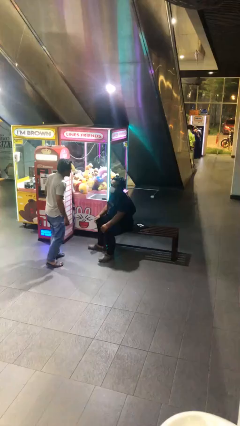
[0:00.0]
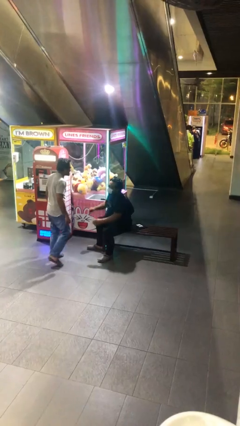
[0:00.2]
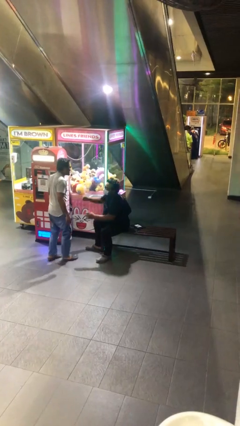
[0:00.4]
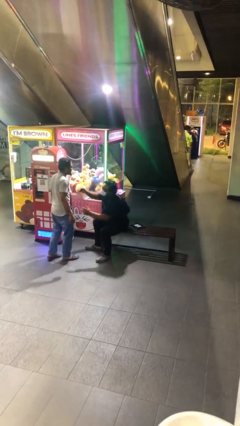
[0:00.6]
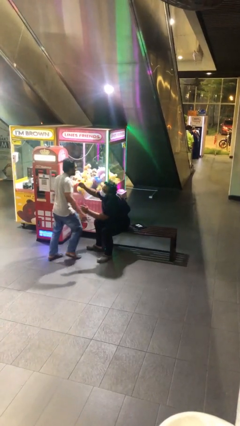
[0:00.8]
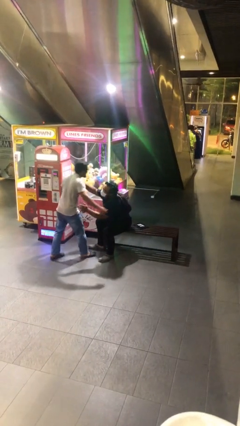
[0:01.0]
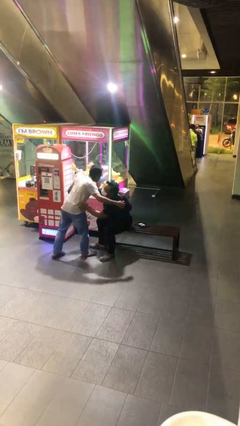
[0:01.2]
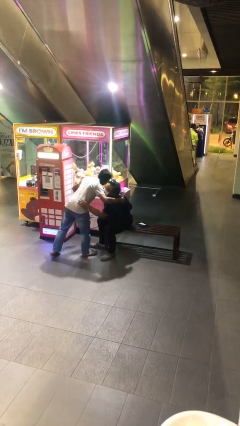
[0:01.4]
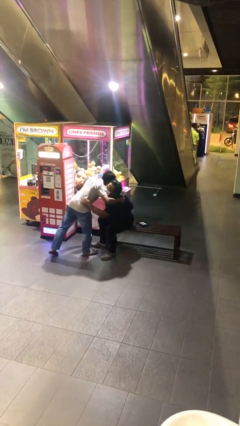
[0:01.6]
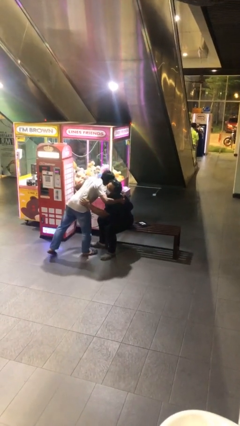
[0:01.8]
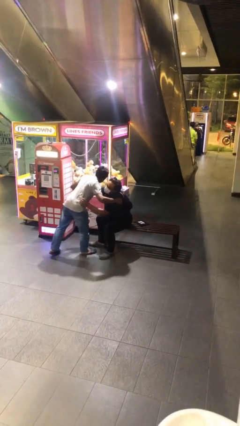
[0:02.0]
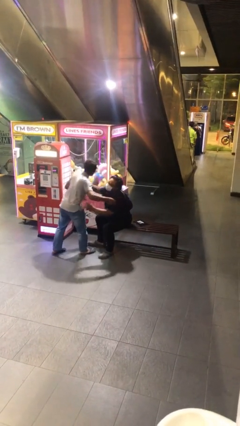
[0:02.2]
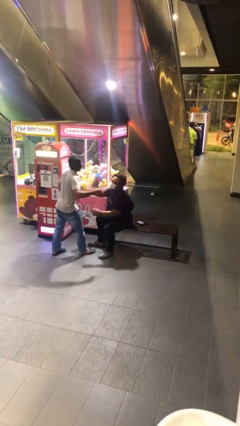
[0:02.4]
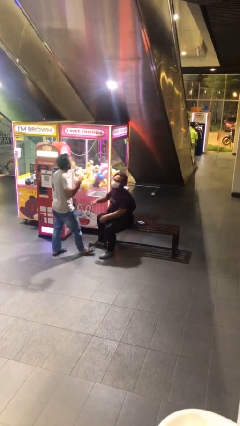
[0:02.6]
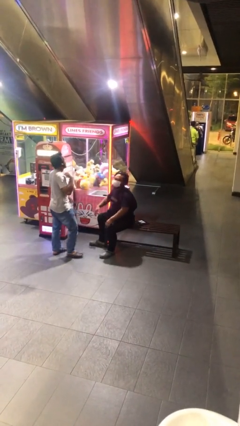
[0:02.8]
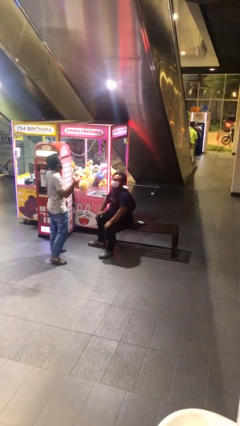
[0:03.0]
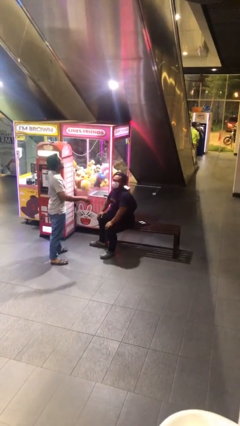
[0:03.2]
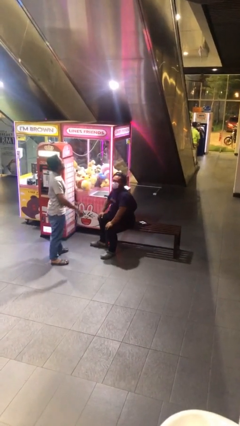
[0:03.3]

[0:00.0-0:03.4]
person embraces person

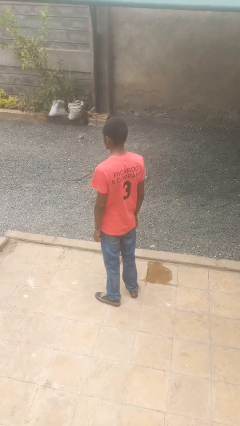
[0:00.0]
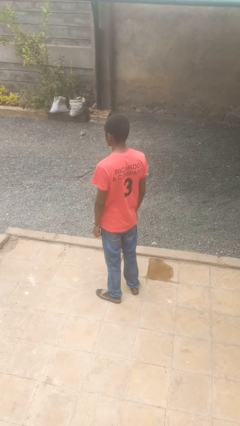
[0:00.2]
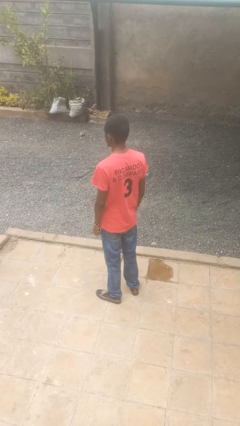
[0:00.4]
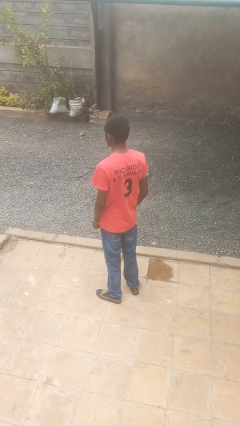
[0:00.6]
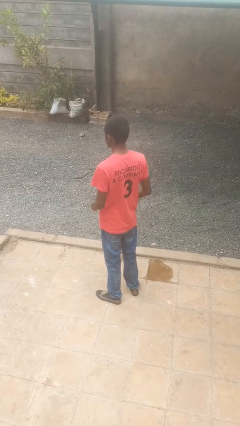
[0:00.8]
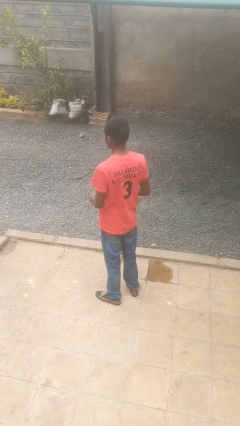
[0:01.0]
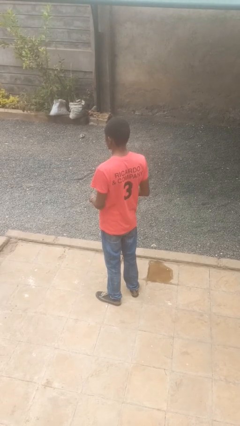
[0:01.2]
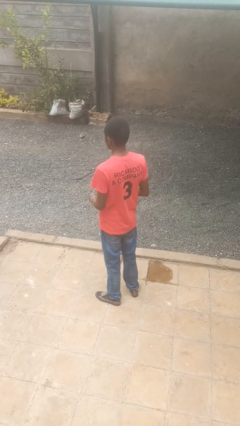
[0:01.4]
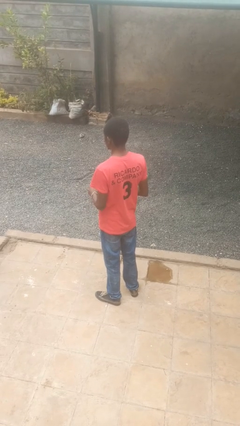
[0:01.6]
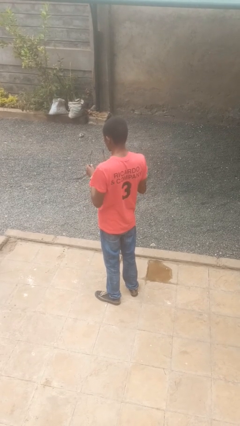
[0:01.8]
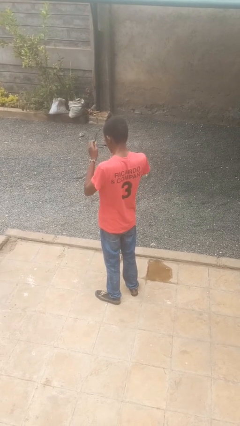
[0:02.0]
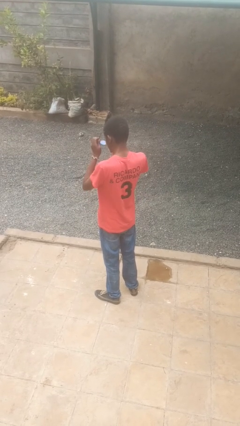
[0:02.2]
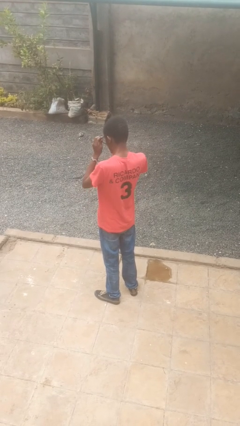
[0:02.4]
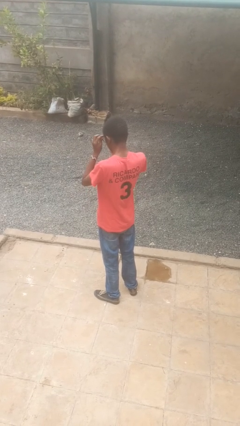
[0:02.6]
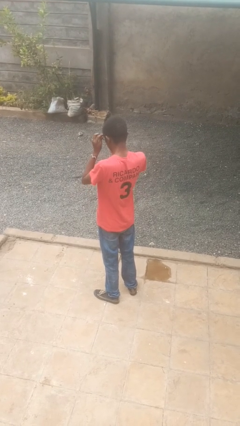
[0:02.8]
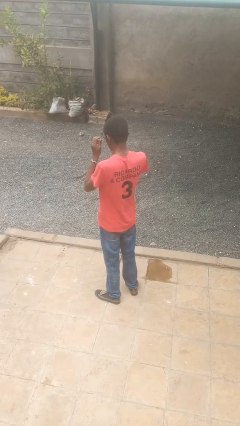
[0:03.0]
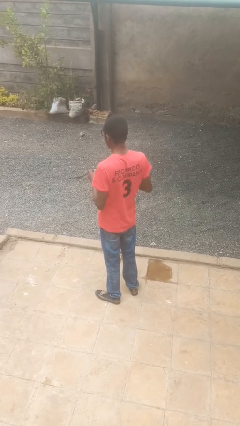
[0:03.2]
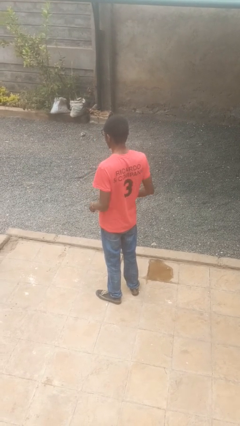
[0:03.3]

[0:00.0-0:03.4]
person puts on glasses

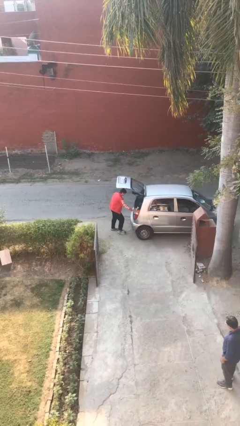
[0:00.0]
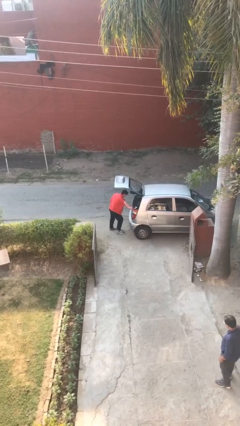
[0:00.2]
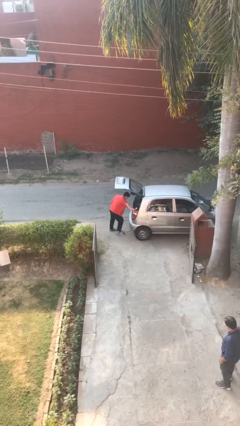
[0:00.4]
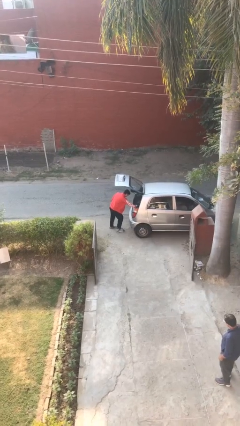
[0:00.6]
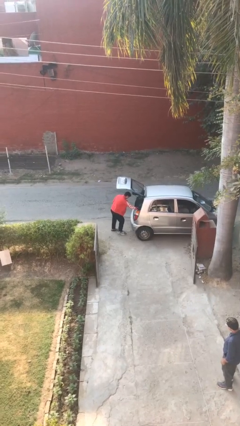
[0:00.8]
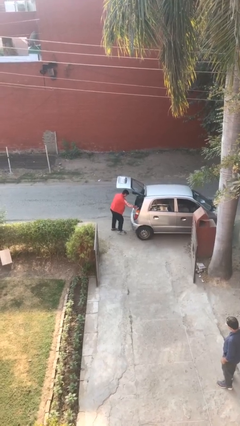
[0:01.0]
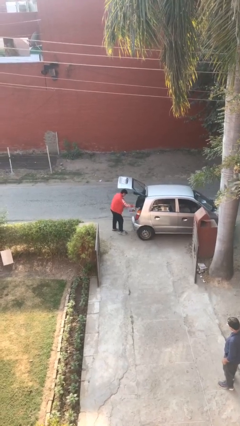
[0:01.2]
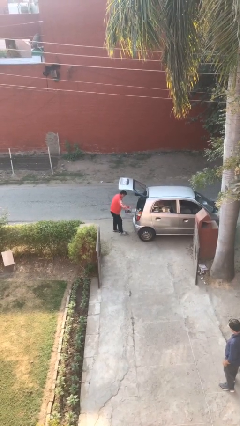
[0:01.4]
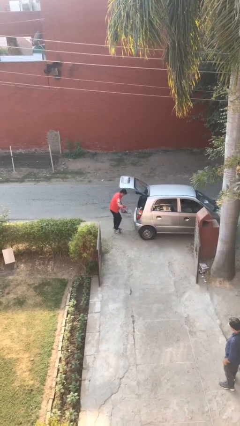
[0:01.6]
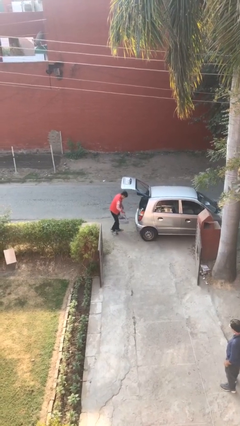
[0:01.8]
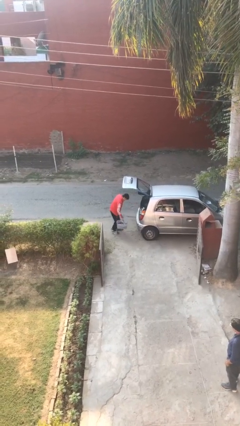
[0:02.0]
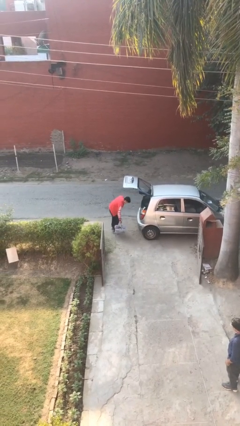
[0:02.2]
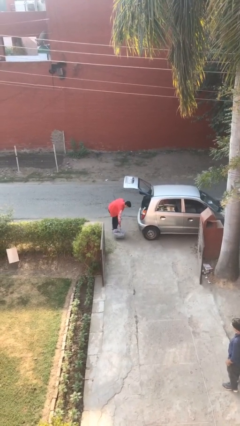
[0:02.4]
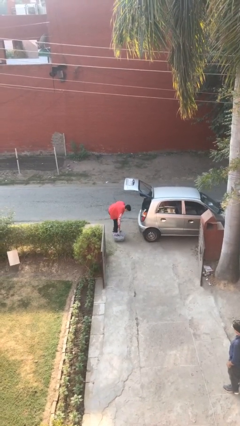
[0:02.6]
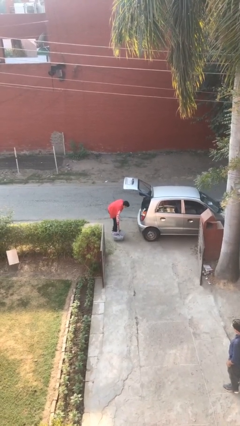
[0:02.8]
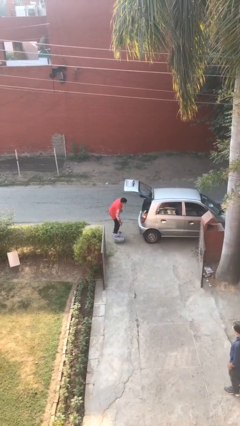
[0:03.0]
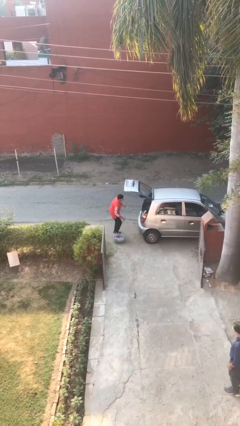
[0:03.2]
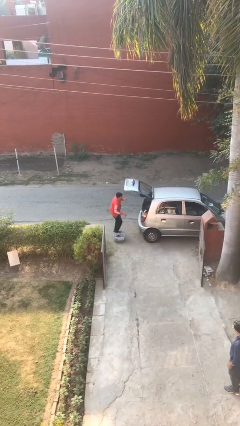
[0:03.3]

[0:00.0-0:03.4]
person unloads car

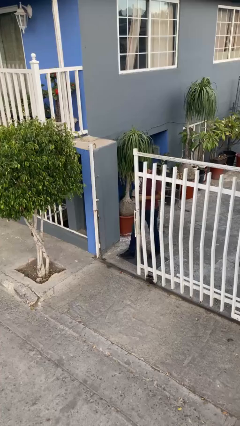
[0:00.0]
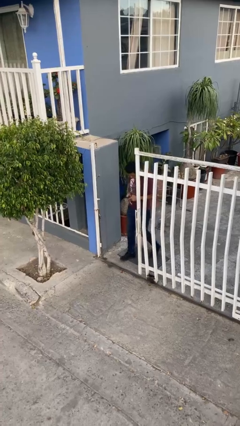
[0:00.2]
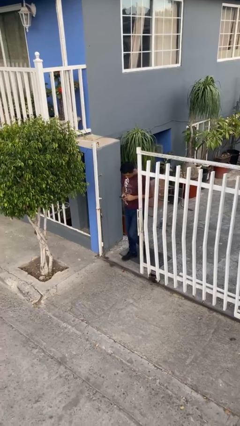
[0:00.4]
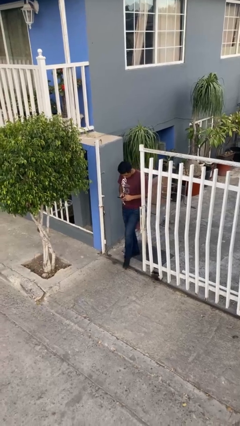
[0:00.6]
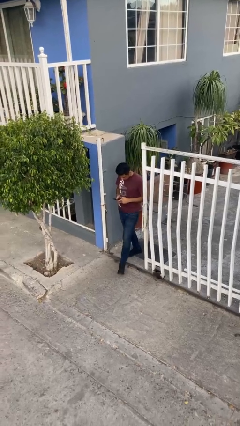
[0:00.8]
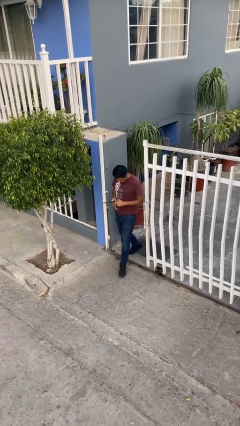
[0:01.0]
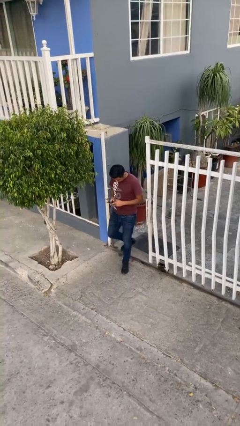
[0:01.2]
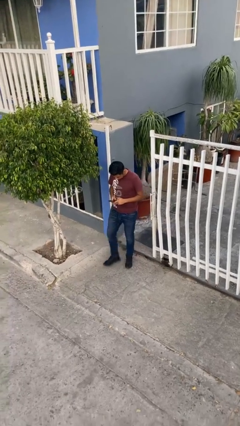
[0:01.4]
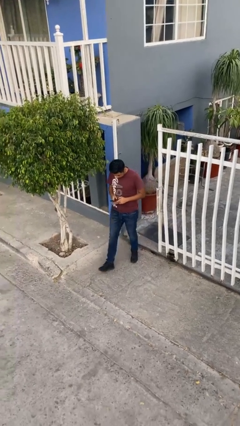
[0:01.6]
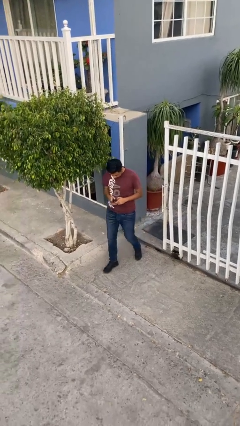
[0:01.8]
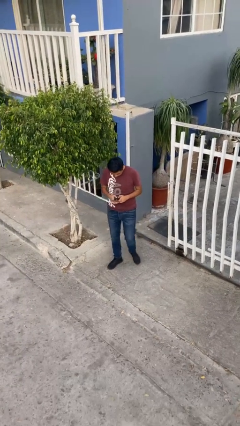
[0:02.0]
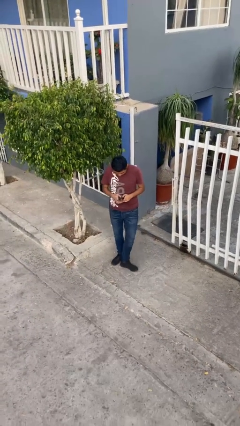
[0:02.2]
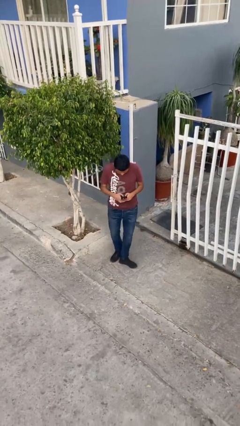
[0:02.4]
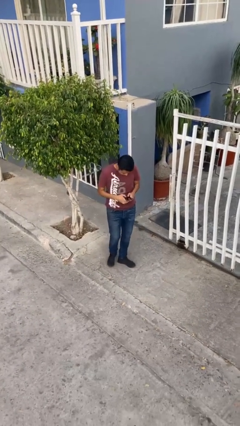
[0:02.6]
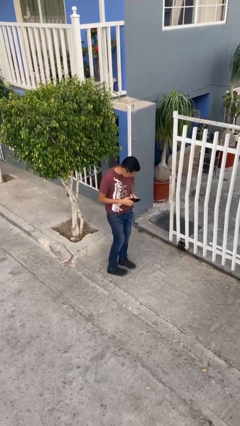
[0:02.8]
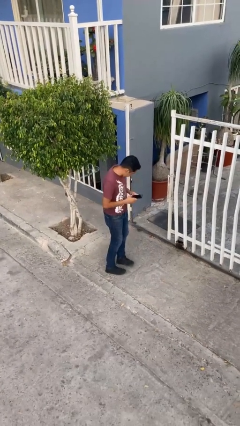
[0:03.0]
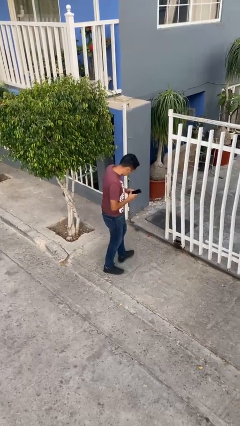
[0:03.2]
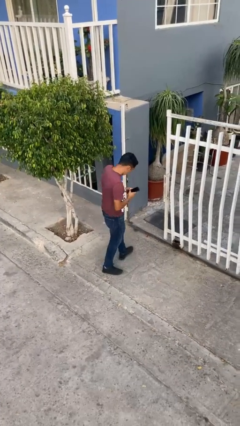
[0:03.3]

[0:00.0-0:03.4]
person enters scene through structure

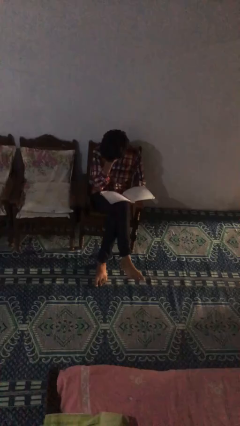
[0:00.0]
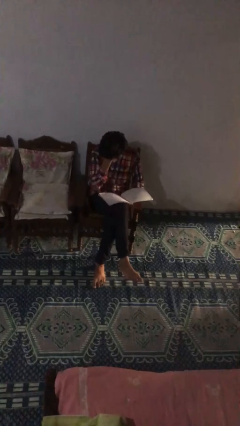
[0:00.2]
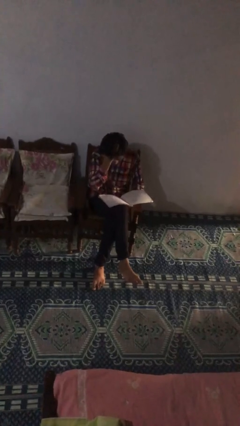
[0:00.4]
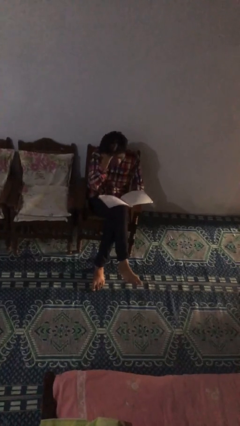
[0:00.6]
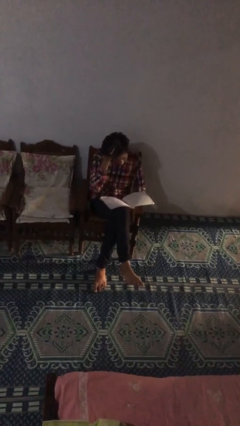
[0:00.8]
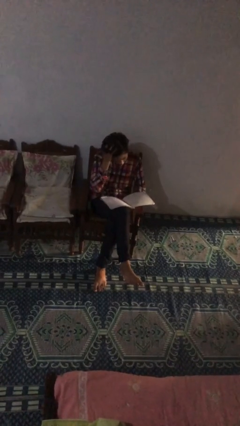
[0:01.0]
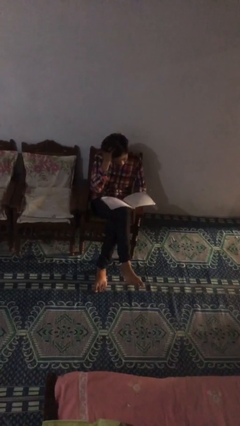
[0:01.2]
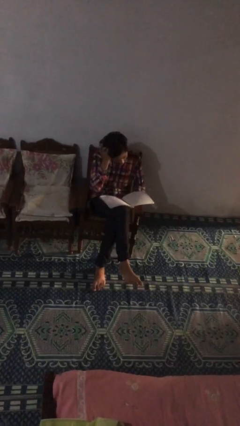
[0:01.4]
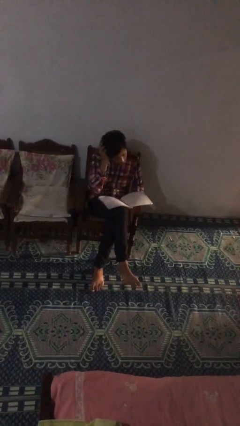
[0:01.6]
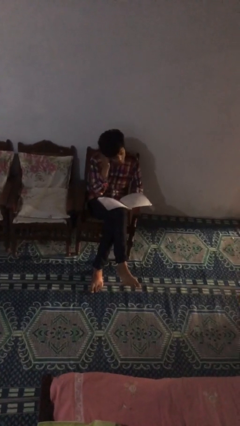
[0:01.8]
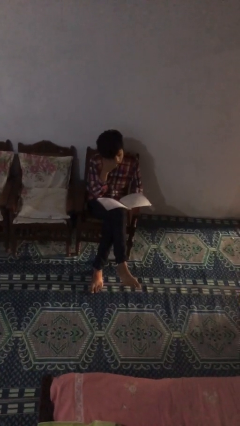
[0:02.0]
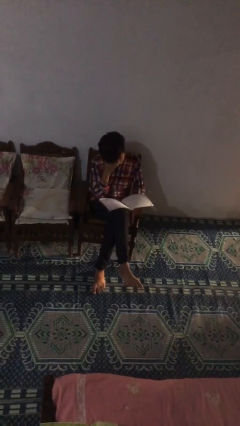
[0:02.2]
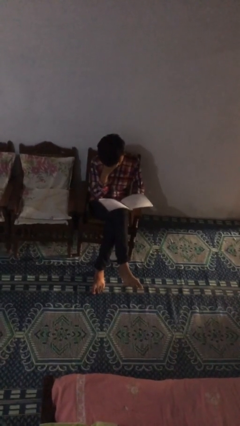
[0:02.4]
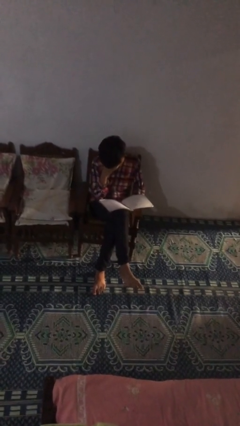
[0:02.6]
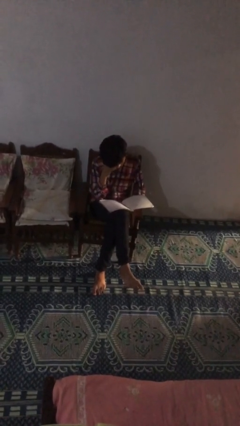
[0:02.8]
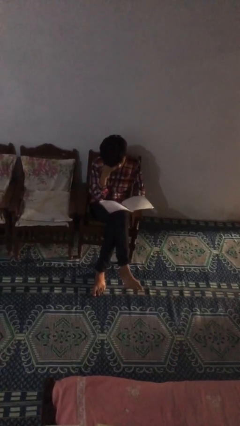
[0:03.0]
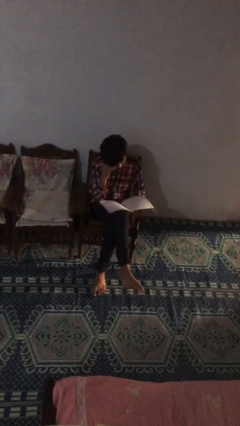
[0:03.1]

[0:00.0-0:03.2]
person reads document

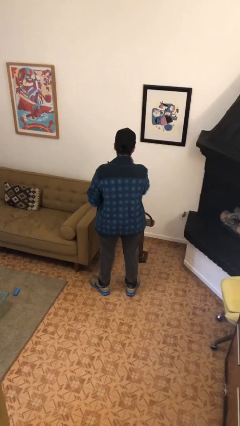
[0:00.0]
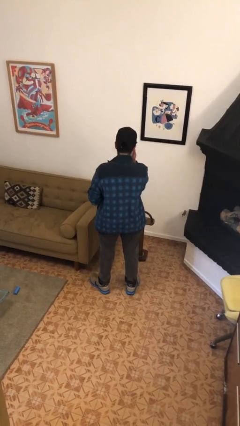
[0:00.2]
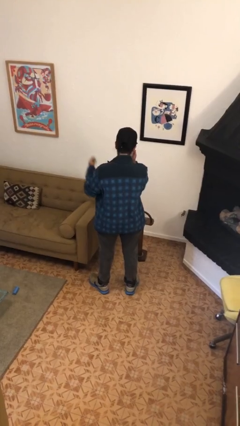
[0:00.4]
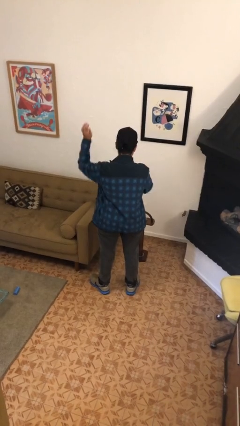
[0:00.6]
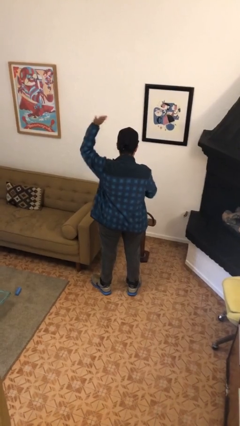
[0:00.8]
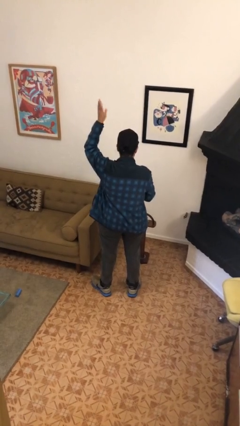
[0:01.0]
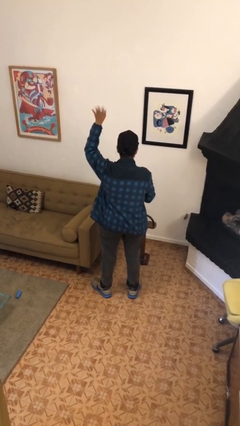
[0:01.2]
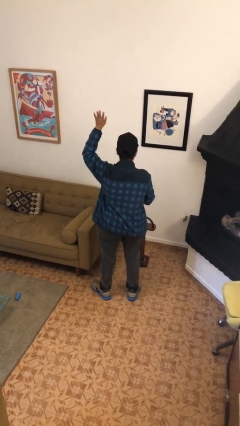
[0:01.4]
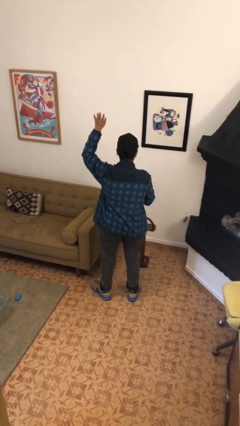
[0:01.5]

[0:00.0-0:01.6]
person gestures raise hand
